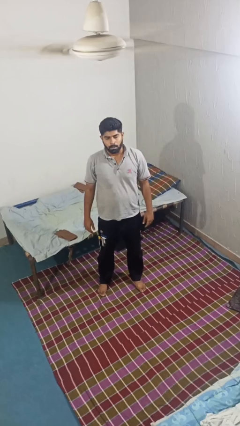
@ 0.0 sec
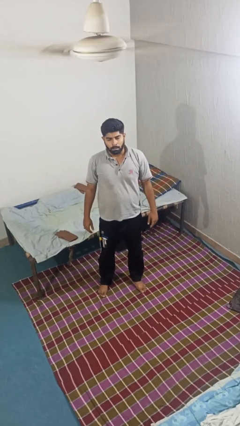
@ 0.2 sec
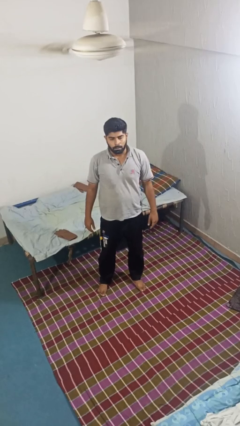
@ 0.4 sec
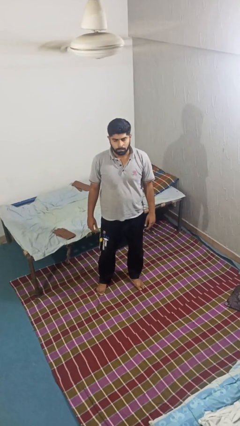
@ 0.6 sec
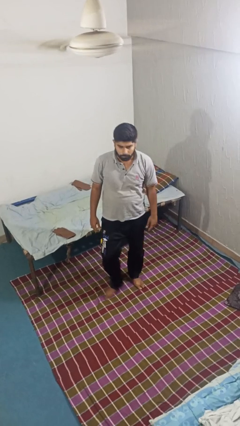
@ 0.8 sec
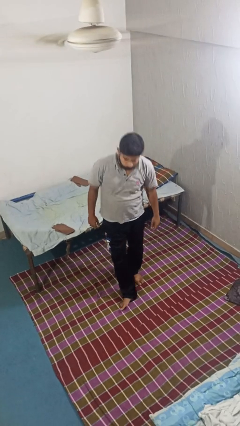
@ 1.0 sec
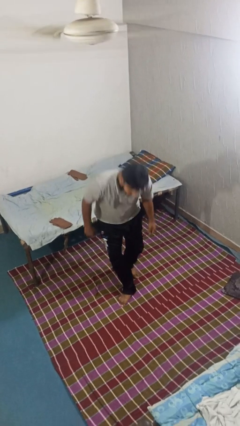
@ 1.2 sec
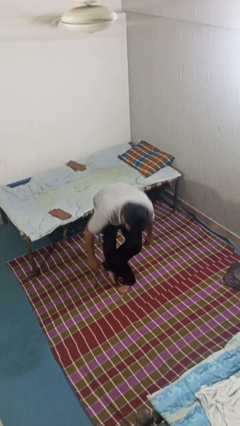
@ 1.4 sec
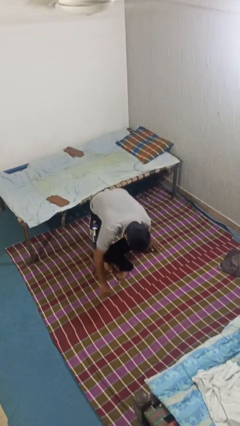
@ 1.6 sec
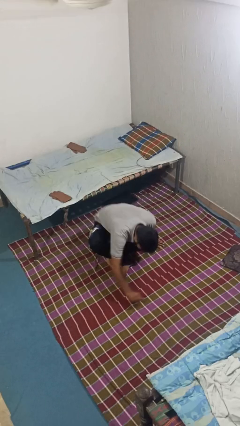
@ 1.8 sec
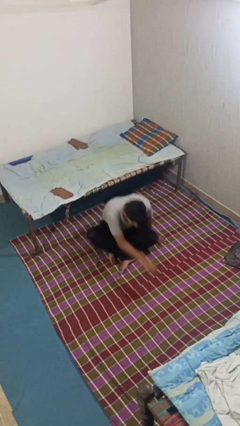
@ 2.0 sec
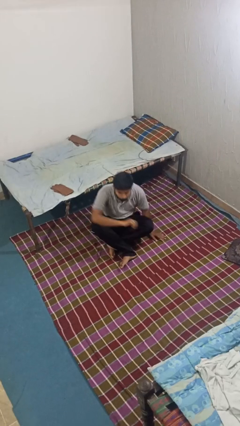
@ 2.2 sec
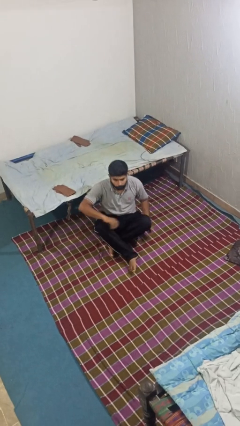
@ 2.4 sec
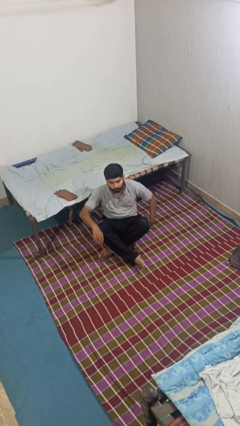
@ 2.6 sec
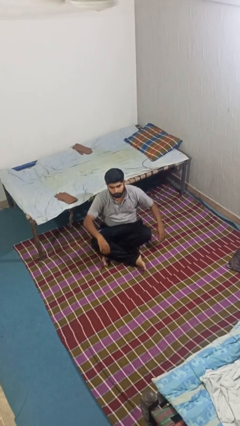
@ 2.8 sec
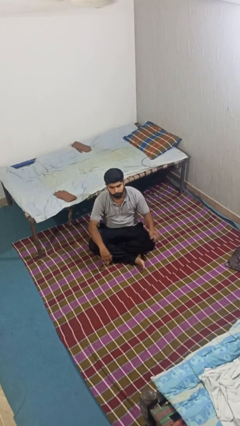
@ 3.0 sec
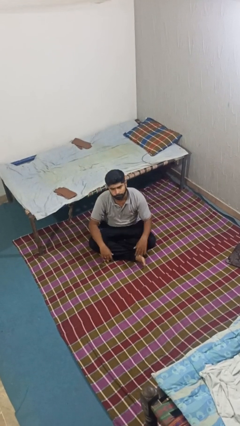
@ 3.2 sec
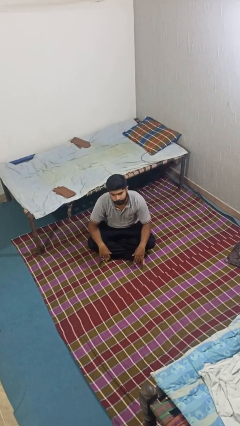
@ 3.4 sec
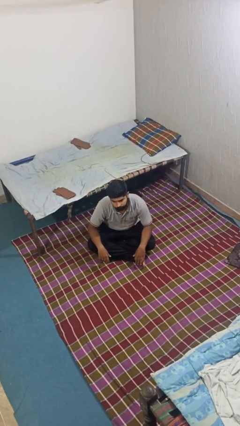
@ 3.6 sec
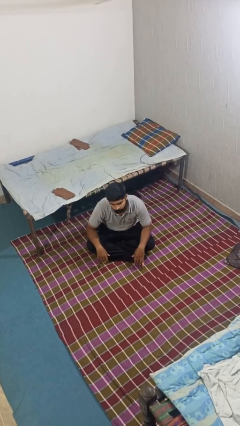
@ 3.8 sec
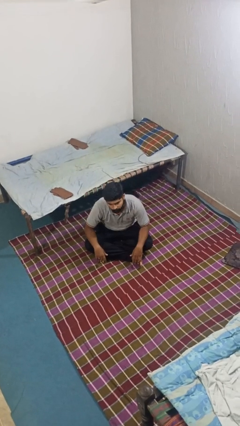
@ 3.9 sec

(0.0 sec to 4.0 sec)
person sits crisscross

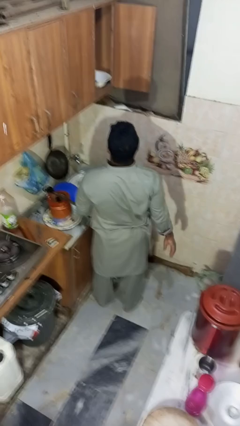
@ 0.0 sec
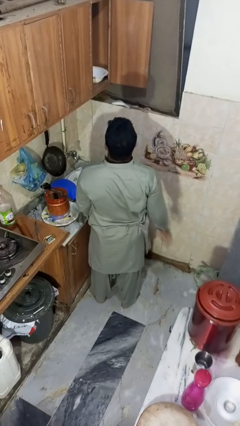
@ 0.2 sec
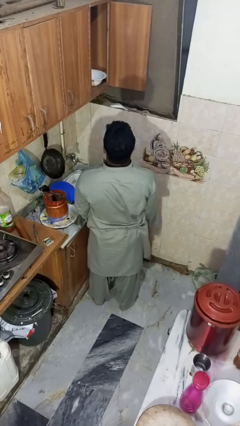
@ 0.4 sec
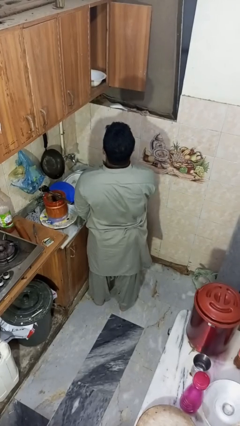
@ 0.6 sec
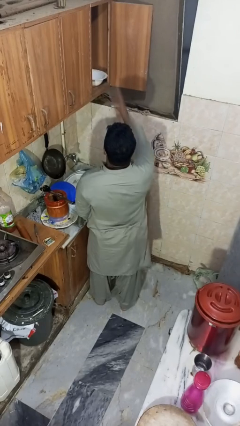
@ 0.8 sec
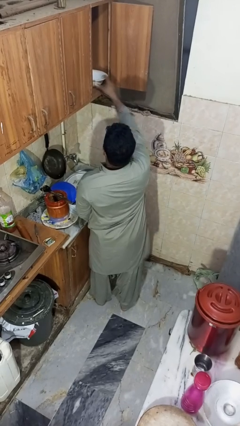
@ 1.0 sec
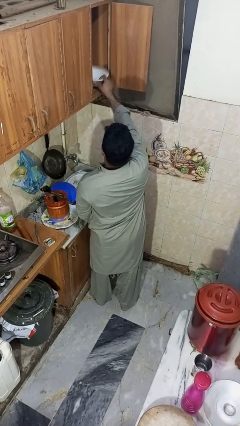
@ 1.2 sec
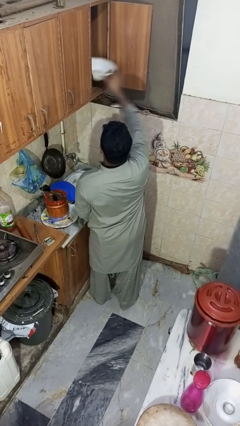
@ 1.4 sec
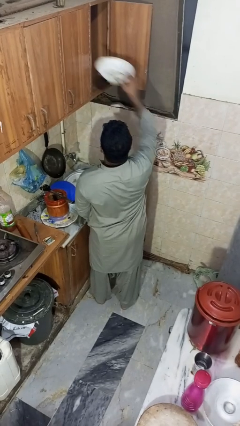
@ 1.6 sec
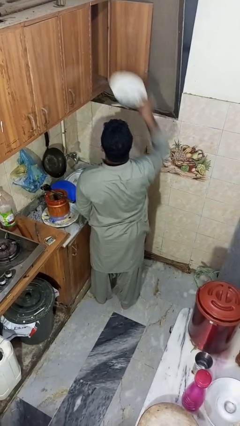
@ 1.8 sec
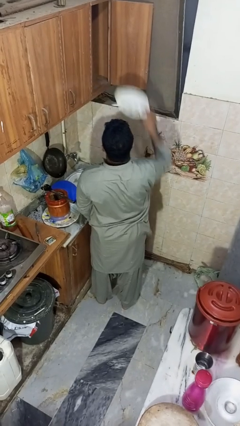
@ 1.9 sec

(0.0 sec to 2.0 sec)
person takes object from cabinet

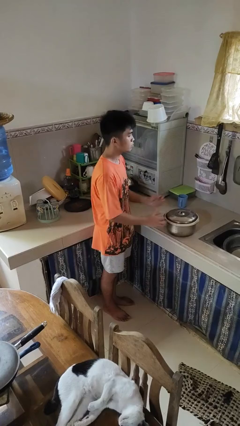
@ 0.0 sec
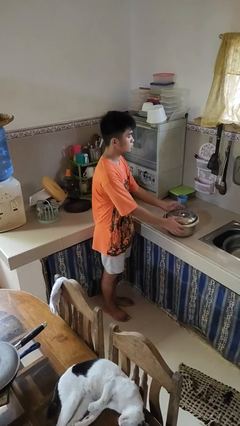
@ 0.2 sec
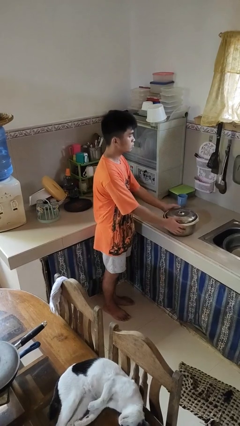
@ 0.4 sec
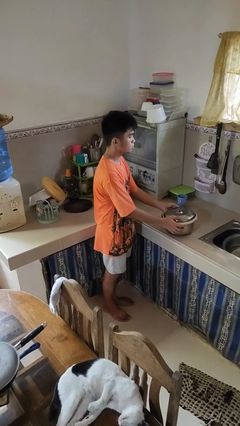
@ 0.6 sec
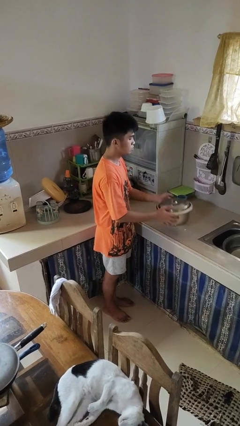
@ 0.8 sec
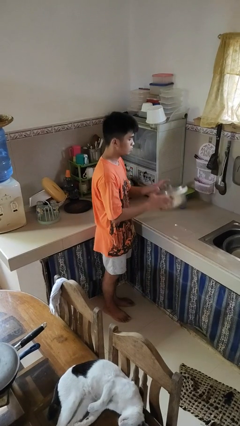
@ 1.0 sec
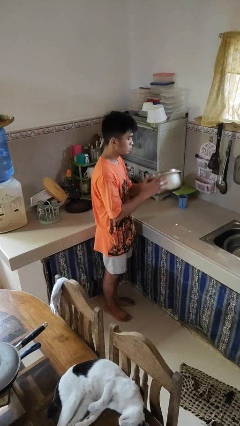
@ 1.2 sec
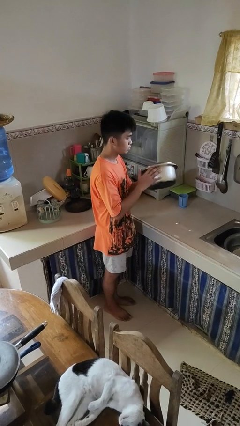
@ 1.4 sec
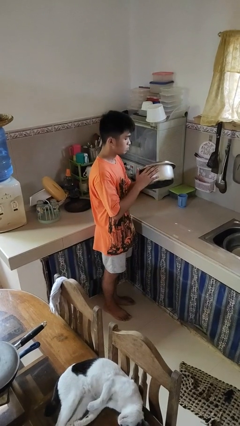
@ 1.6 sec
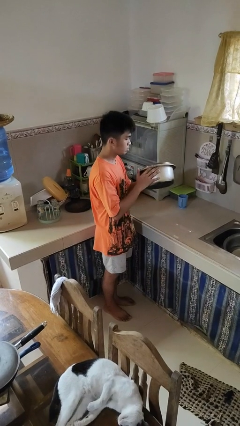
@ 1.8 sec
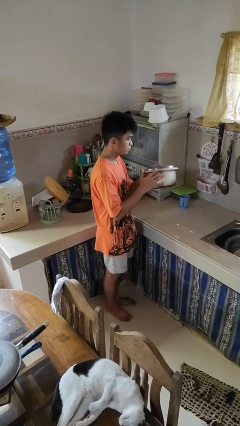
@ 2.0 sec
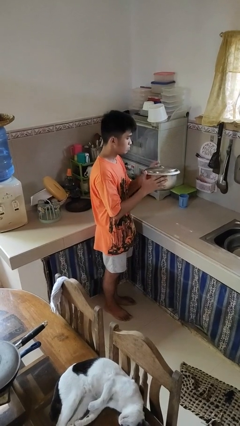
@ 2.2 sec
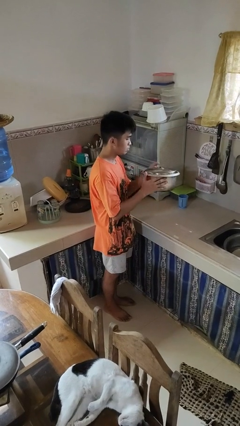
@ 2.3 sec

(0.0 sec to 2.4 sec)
person picks up object from countertop

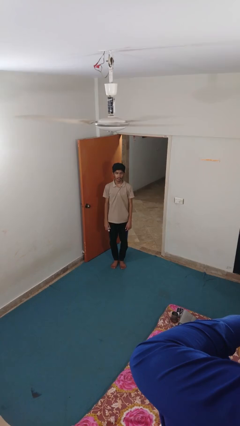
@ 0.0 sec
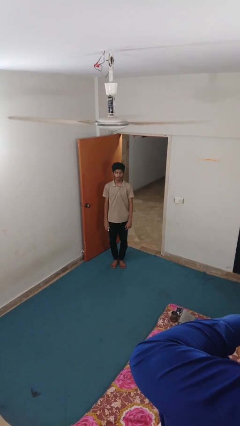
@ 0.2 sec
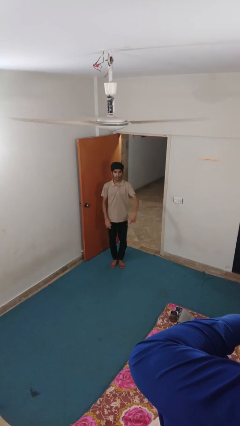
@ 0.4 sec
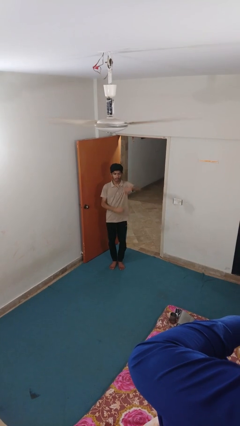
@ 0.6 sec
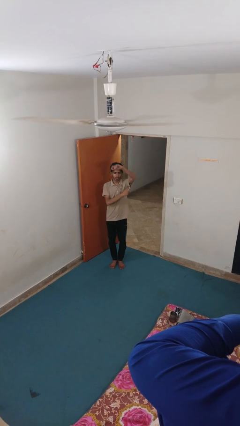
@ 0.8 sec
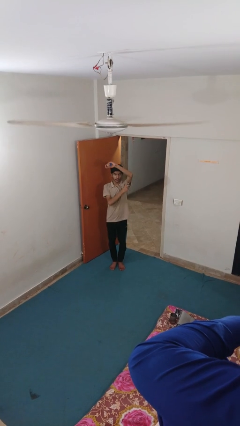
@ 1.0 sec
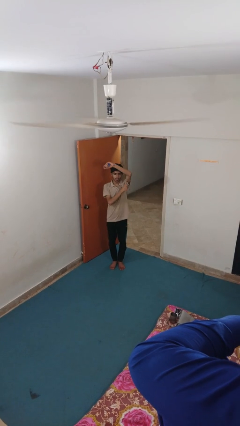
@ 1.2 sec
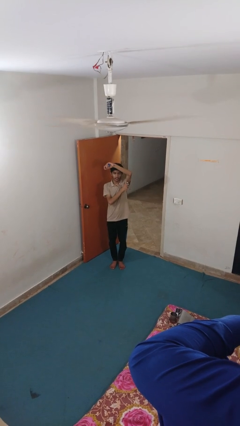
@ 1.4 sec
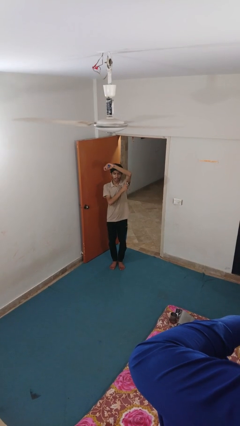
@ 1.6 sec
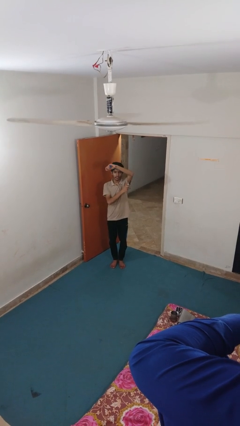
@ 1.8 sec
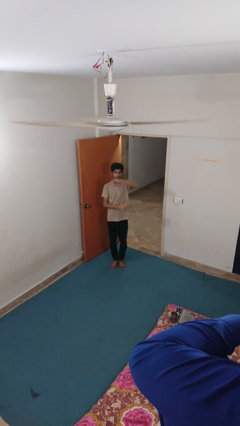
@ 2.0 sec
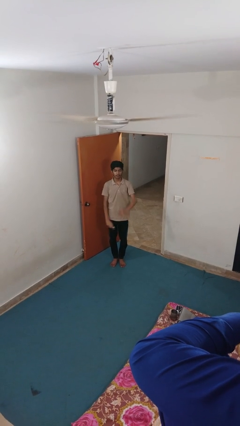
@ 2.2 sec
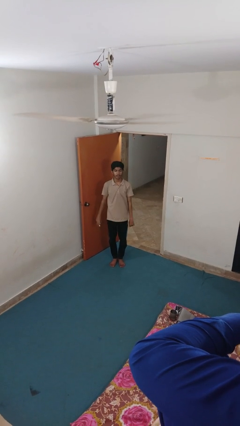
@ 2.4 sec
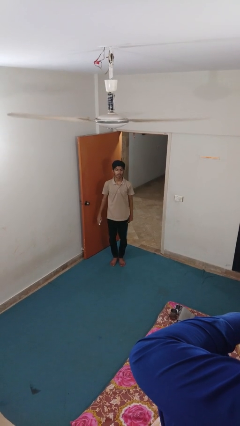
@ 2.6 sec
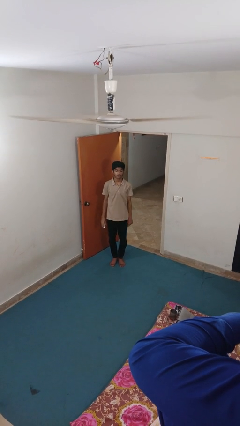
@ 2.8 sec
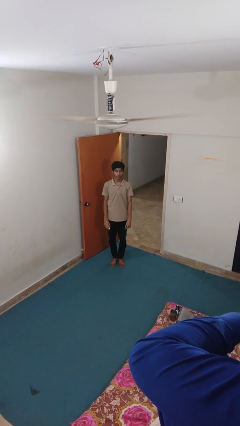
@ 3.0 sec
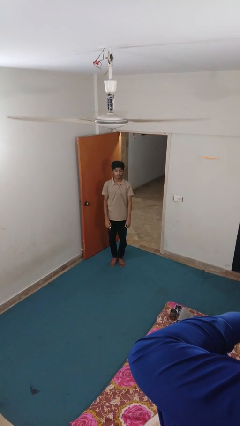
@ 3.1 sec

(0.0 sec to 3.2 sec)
person applies deodorant

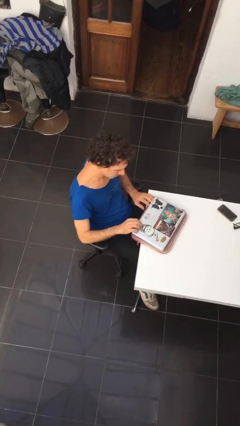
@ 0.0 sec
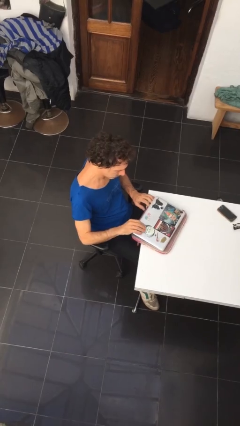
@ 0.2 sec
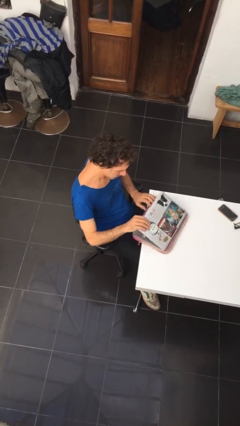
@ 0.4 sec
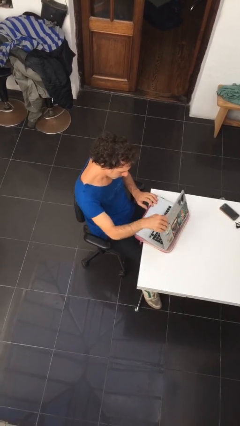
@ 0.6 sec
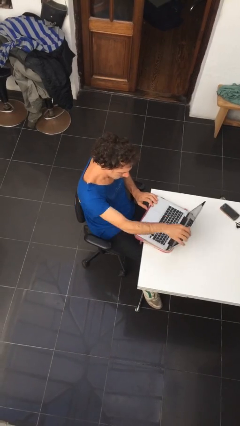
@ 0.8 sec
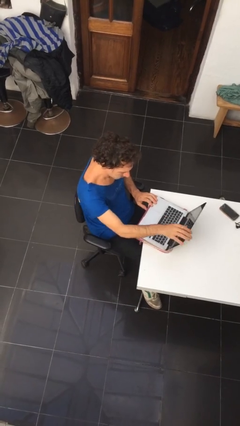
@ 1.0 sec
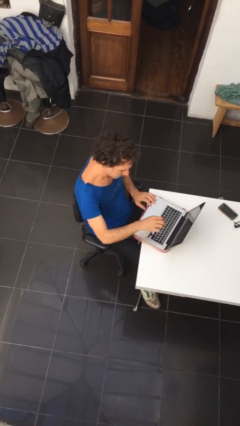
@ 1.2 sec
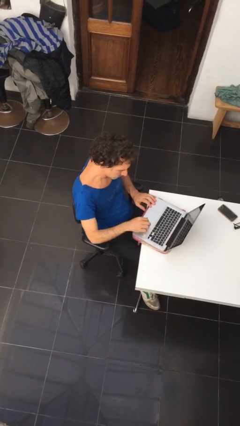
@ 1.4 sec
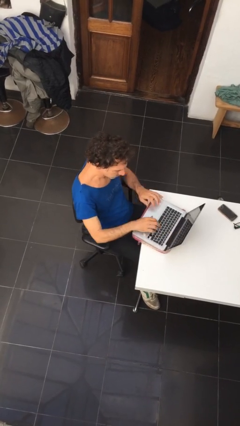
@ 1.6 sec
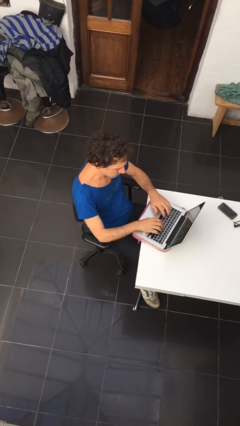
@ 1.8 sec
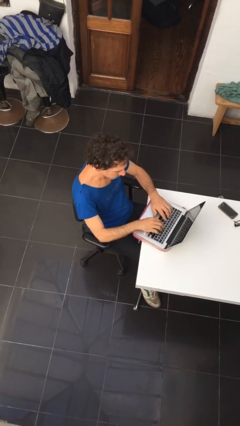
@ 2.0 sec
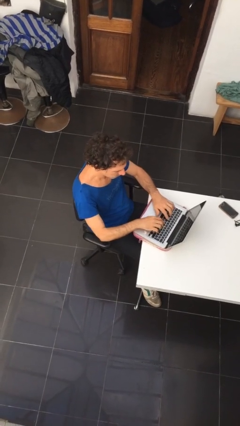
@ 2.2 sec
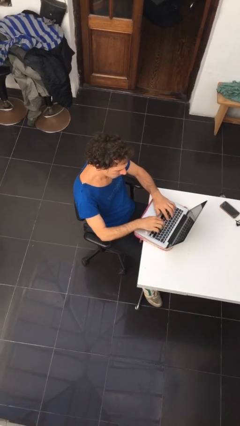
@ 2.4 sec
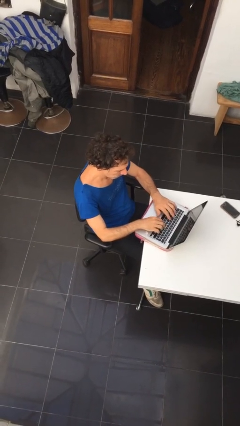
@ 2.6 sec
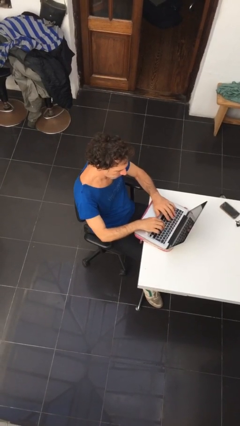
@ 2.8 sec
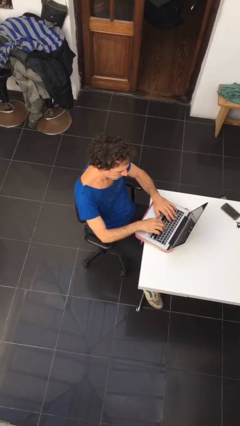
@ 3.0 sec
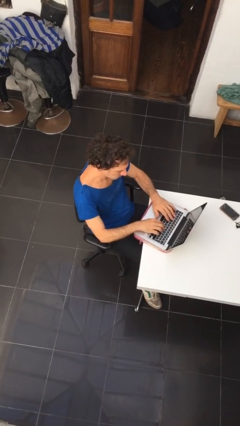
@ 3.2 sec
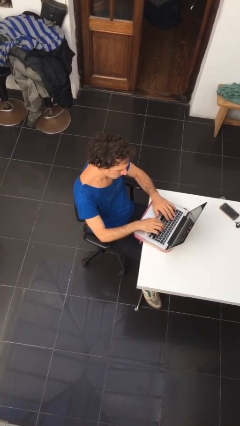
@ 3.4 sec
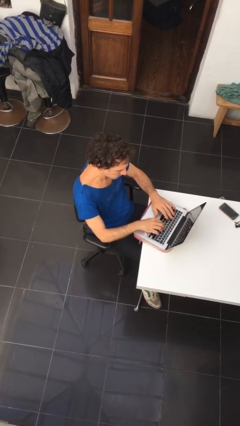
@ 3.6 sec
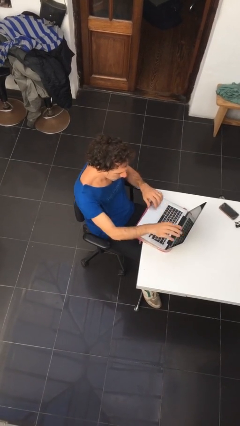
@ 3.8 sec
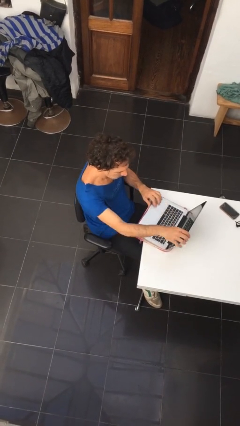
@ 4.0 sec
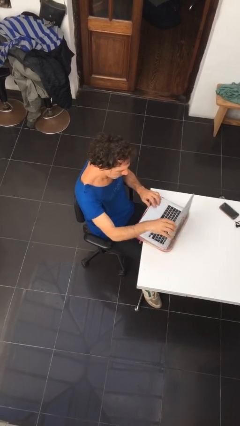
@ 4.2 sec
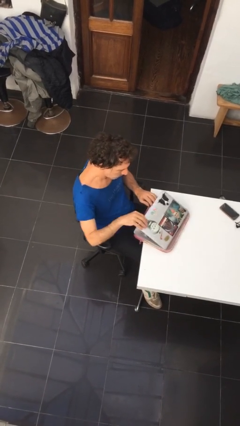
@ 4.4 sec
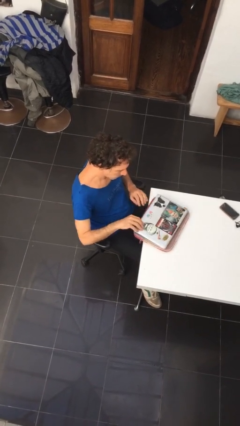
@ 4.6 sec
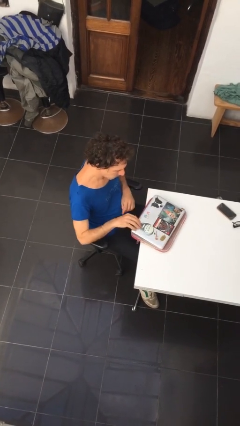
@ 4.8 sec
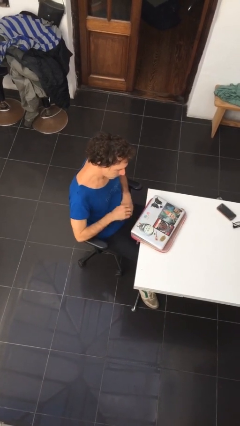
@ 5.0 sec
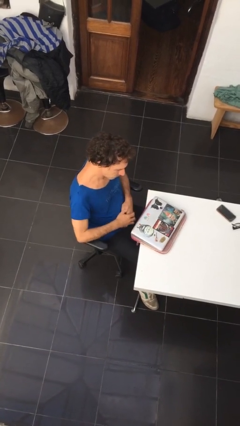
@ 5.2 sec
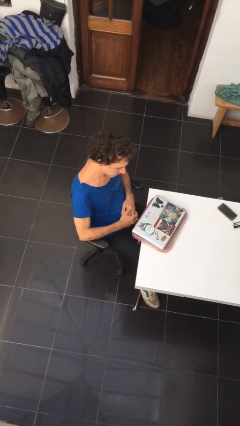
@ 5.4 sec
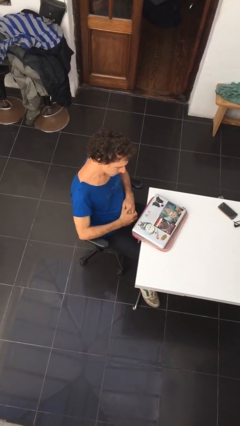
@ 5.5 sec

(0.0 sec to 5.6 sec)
person interacts with laptop

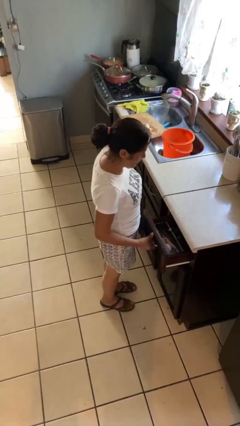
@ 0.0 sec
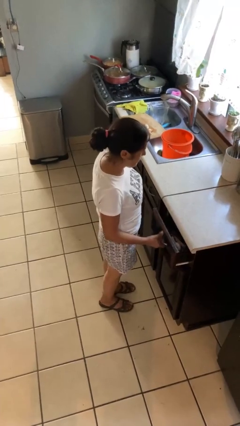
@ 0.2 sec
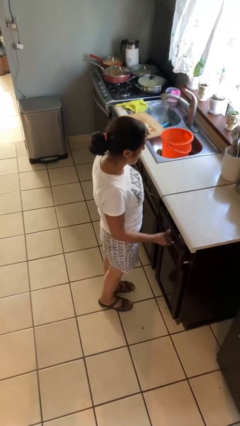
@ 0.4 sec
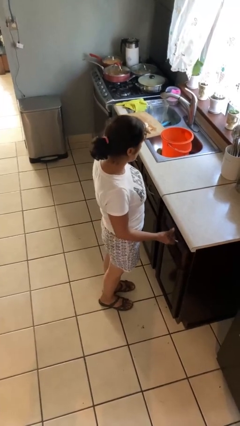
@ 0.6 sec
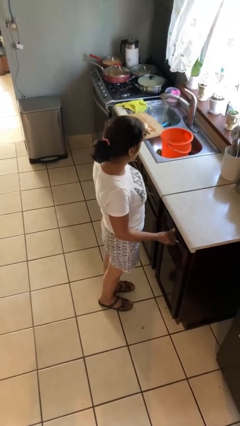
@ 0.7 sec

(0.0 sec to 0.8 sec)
person closes kitchen drawer
